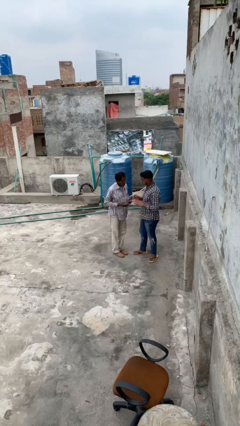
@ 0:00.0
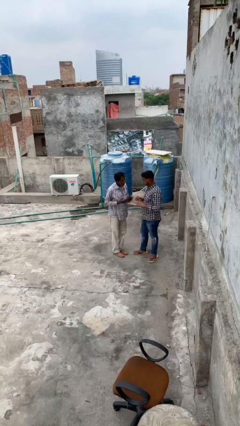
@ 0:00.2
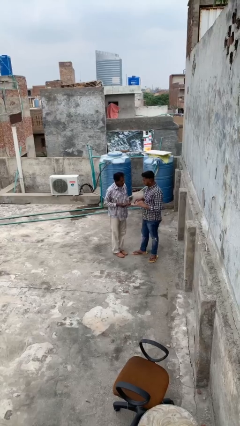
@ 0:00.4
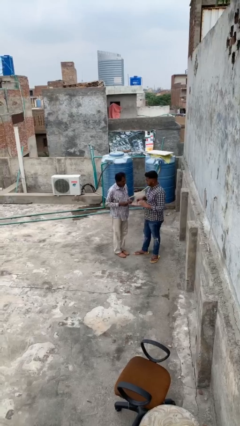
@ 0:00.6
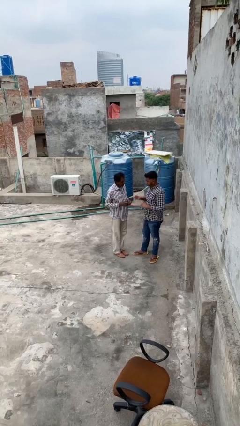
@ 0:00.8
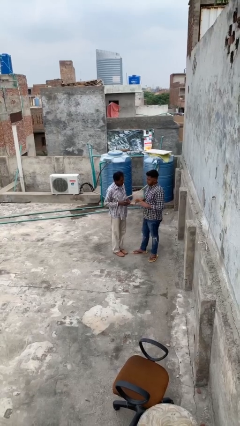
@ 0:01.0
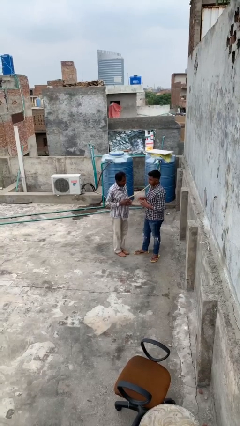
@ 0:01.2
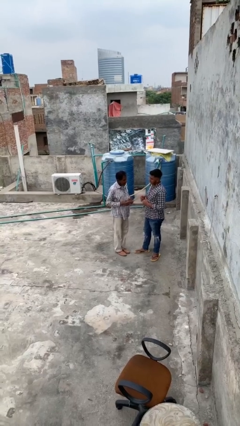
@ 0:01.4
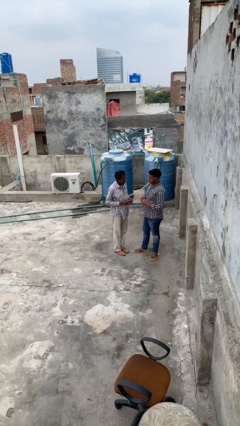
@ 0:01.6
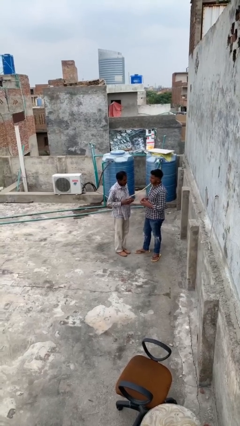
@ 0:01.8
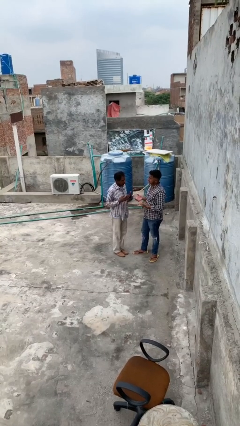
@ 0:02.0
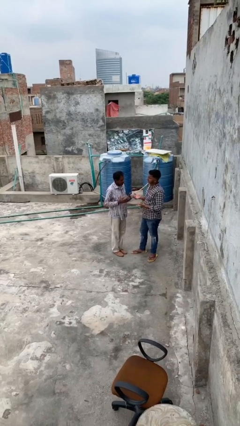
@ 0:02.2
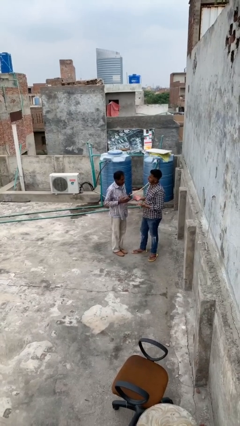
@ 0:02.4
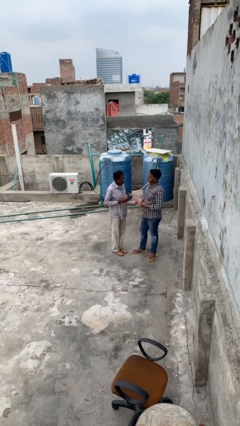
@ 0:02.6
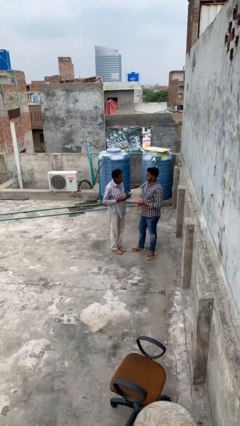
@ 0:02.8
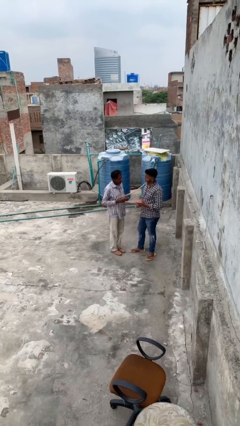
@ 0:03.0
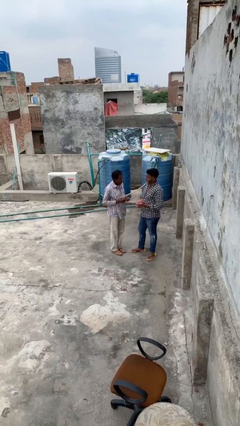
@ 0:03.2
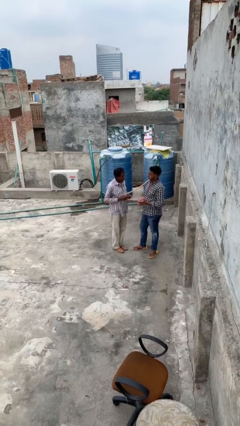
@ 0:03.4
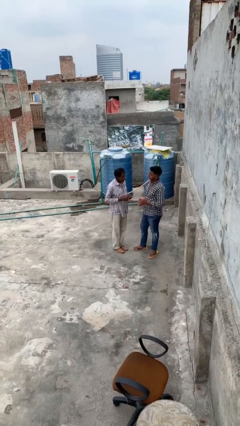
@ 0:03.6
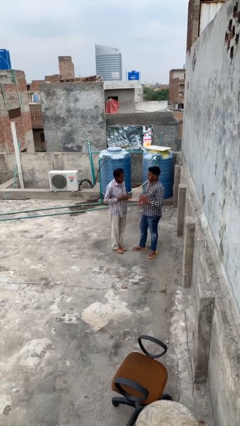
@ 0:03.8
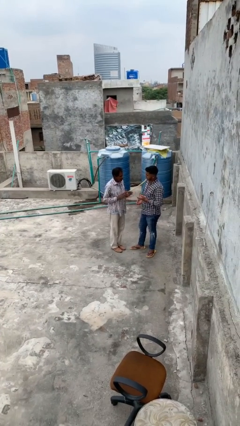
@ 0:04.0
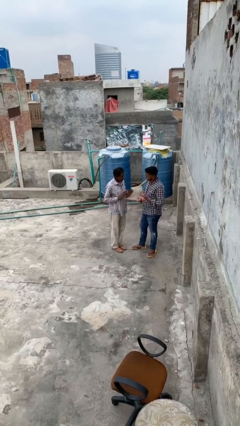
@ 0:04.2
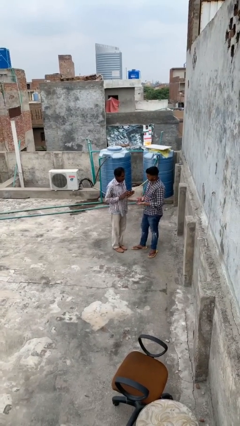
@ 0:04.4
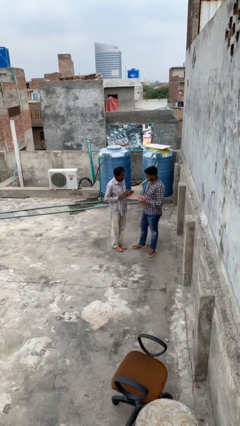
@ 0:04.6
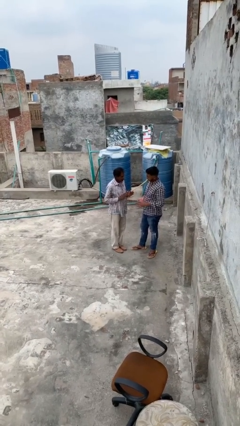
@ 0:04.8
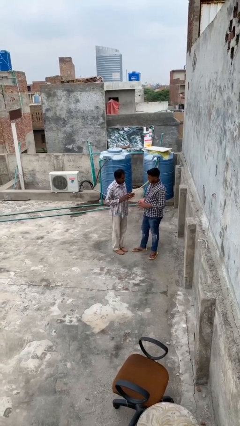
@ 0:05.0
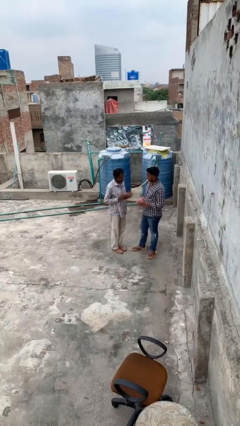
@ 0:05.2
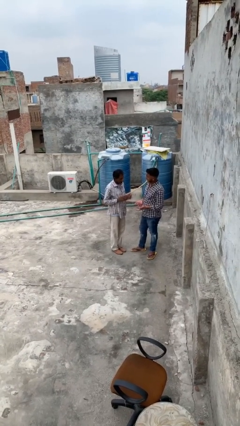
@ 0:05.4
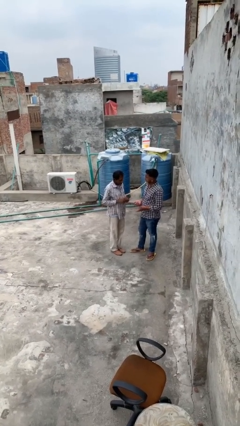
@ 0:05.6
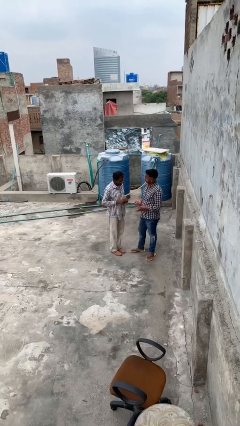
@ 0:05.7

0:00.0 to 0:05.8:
person talks to person

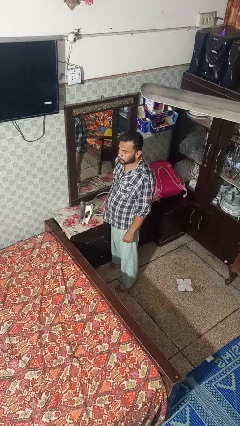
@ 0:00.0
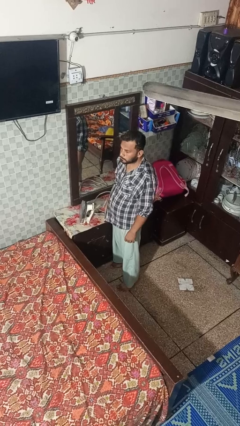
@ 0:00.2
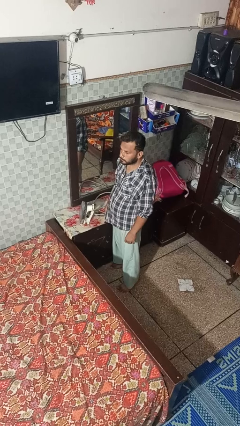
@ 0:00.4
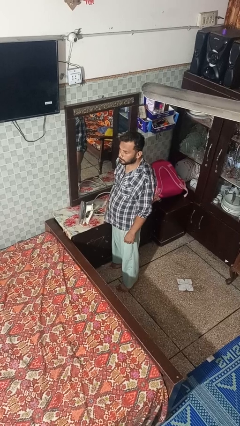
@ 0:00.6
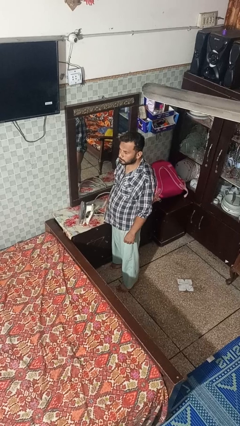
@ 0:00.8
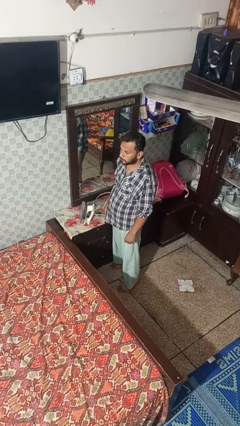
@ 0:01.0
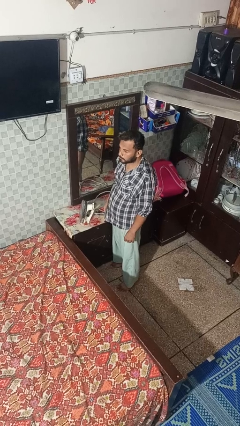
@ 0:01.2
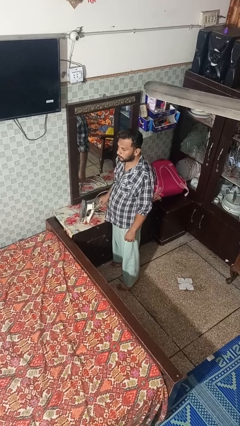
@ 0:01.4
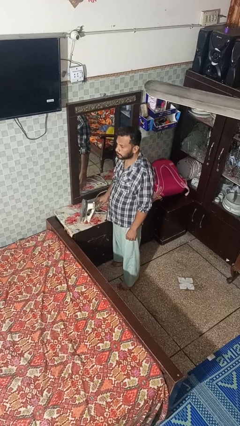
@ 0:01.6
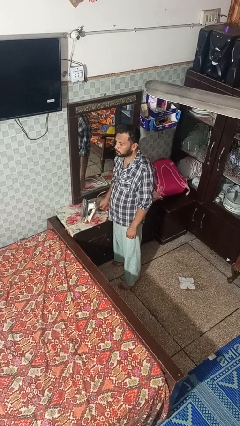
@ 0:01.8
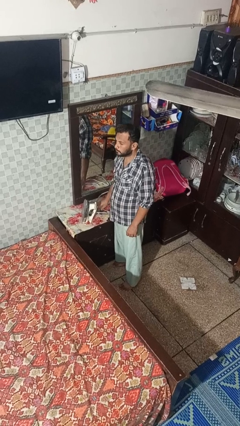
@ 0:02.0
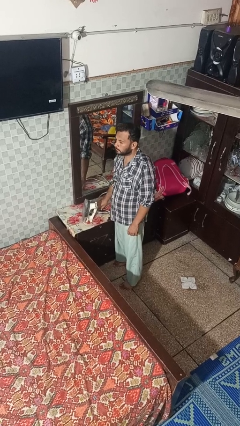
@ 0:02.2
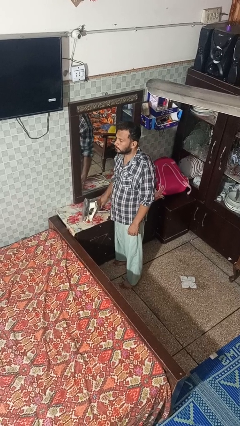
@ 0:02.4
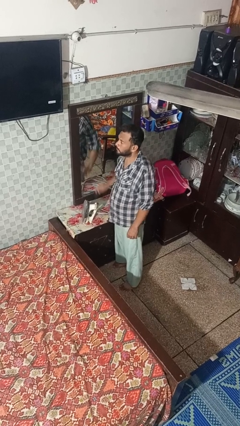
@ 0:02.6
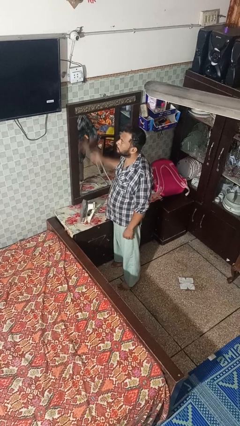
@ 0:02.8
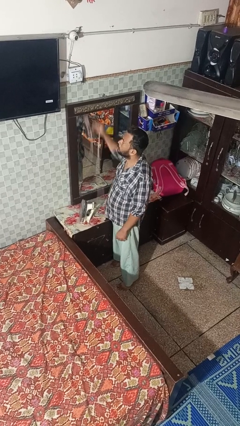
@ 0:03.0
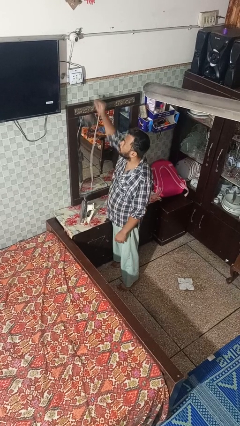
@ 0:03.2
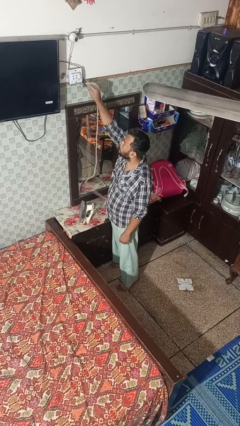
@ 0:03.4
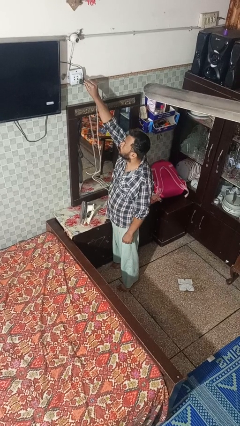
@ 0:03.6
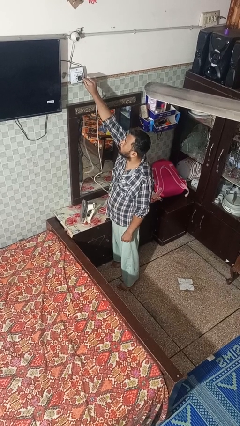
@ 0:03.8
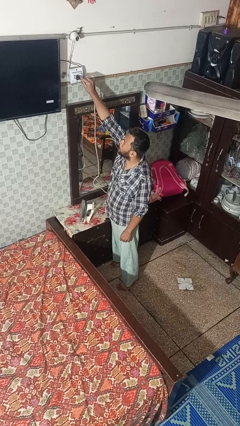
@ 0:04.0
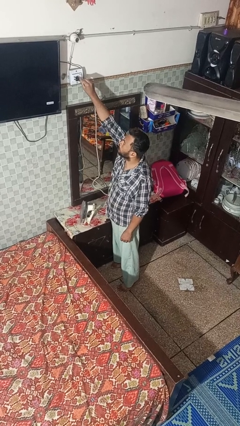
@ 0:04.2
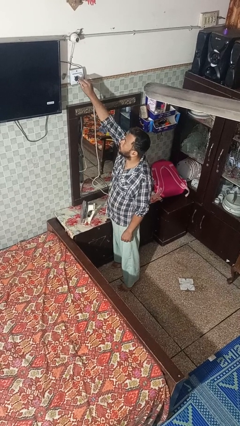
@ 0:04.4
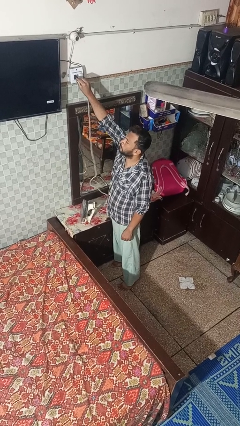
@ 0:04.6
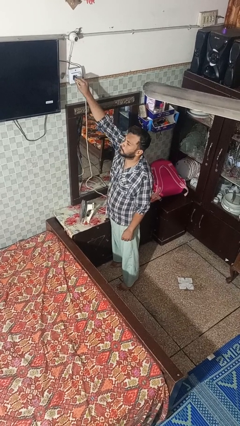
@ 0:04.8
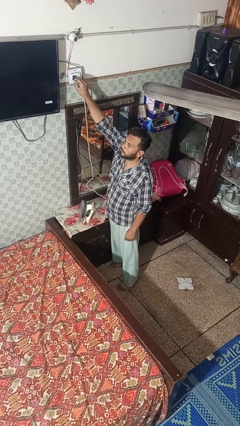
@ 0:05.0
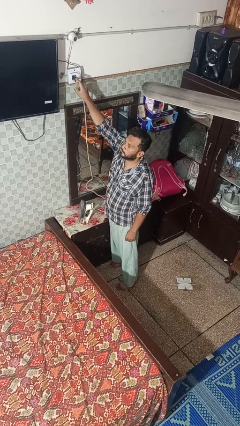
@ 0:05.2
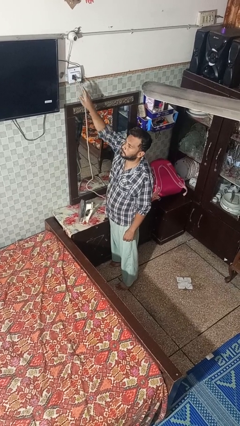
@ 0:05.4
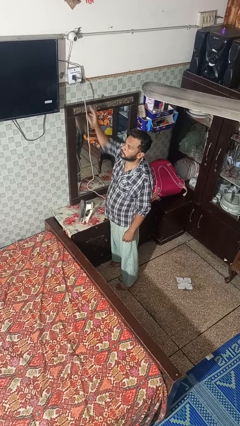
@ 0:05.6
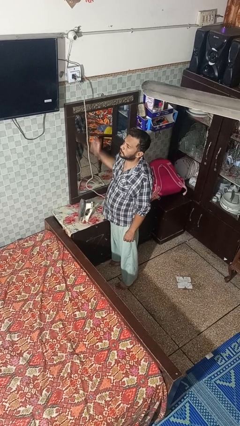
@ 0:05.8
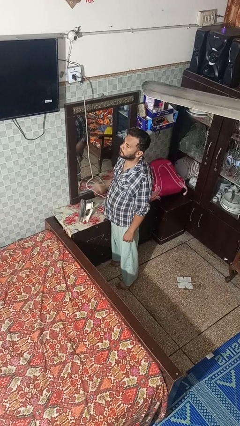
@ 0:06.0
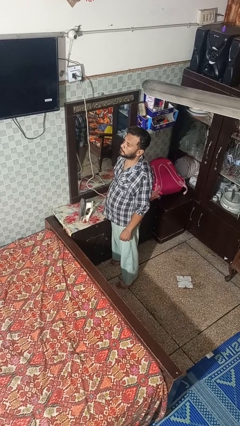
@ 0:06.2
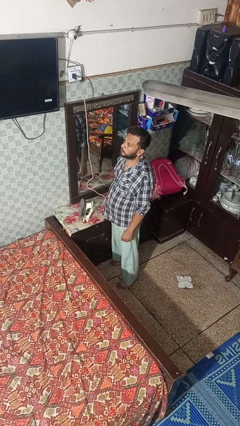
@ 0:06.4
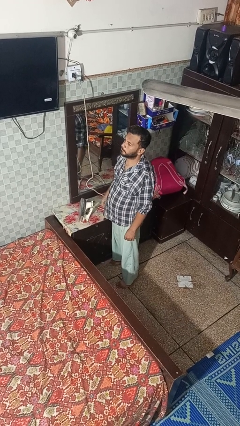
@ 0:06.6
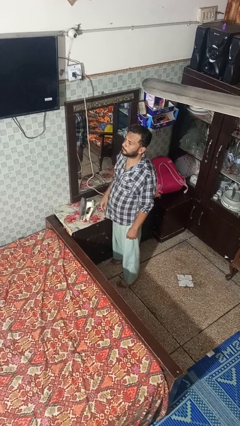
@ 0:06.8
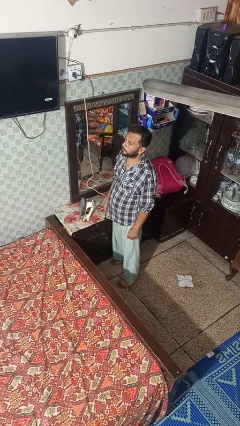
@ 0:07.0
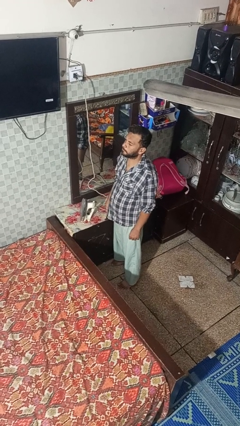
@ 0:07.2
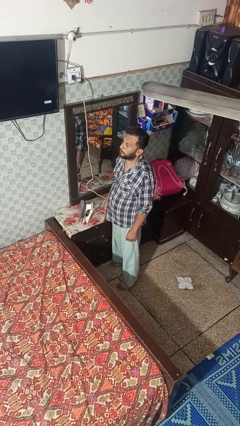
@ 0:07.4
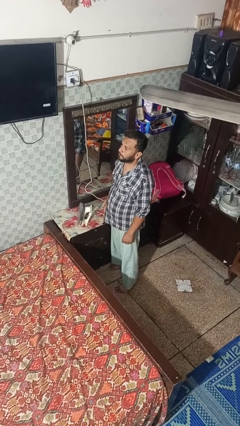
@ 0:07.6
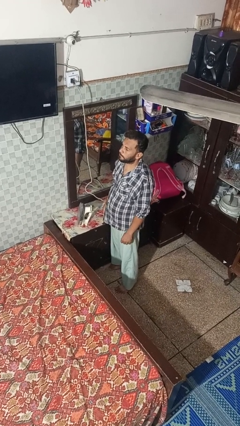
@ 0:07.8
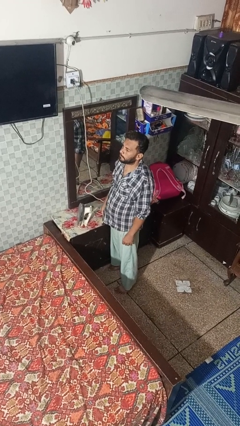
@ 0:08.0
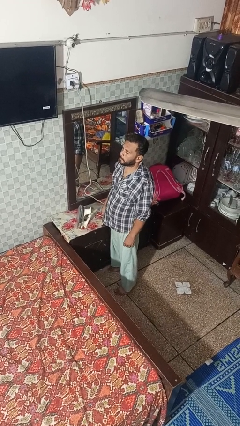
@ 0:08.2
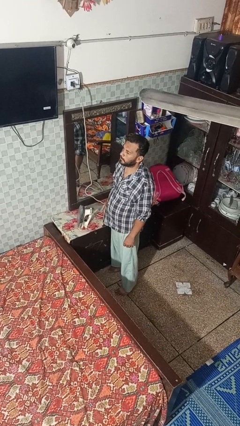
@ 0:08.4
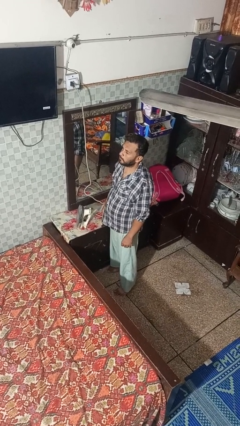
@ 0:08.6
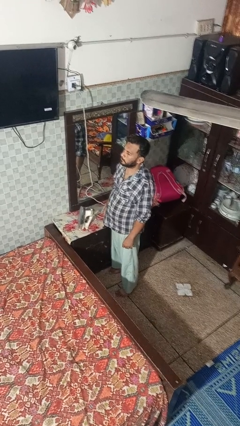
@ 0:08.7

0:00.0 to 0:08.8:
person plugs into electrical socket

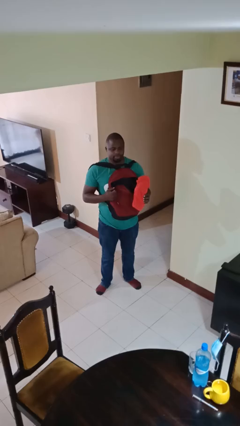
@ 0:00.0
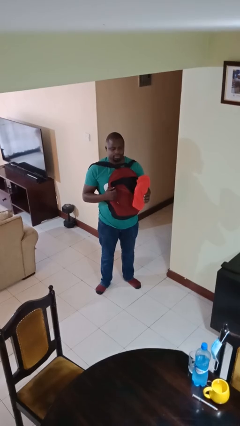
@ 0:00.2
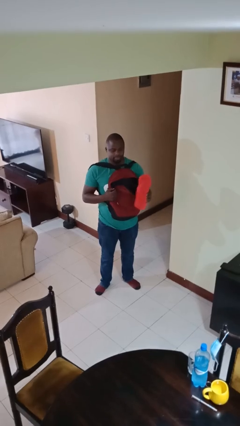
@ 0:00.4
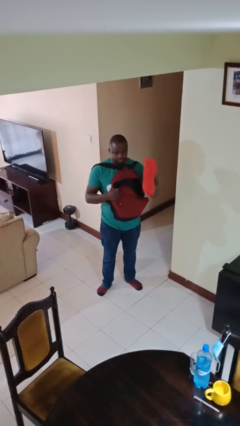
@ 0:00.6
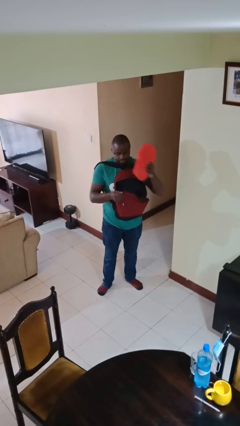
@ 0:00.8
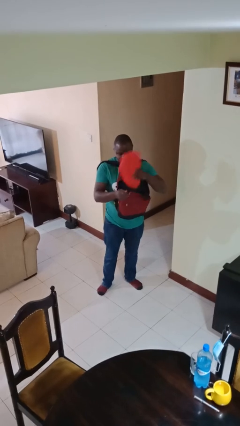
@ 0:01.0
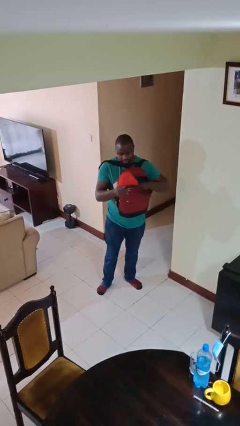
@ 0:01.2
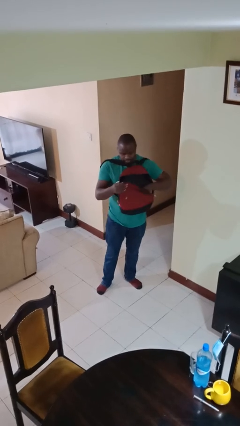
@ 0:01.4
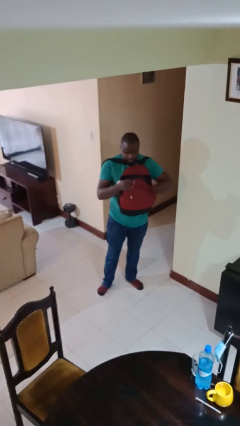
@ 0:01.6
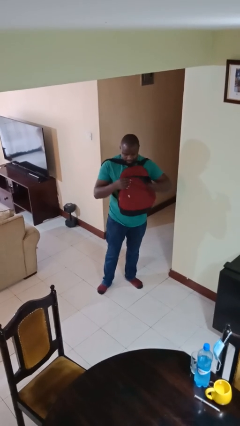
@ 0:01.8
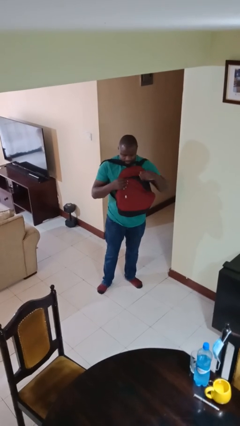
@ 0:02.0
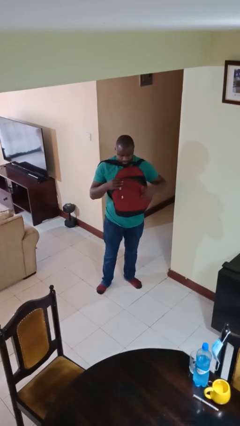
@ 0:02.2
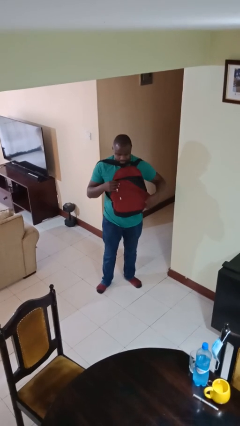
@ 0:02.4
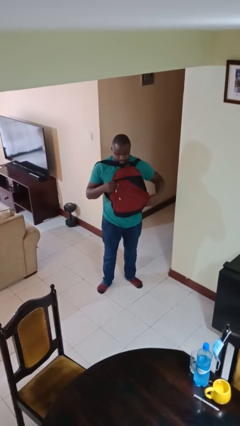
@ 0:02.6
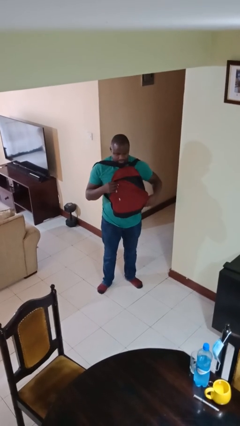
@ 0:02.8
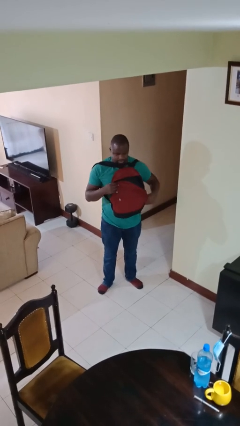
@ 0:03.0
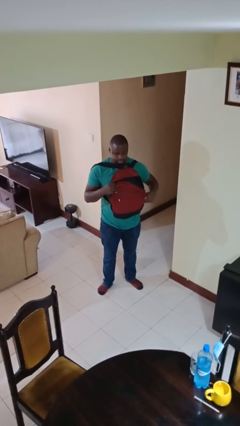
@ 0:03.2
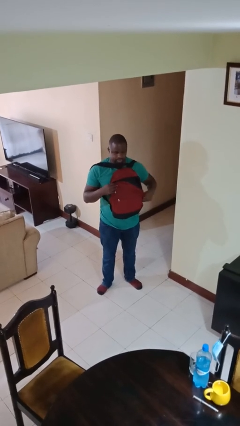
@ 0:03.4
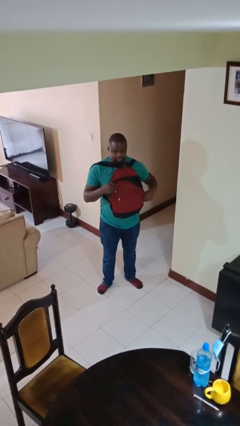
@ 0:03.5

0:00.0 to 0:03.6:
person puts object into backpack
